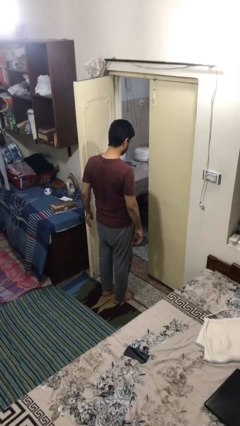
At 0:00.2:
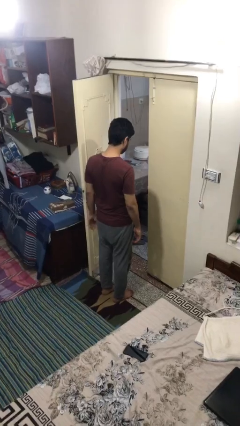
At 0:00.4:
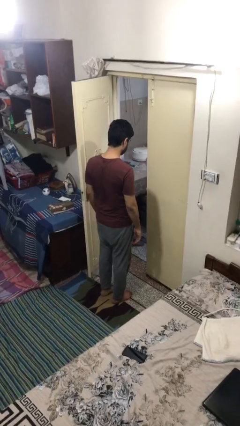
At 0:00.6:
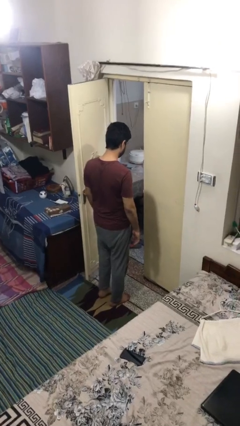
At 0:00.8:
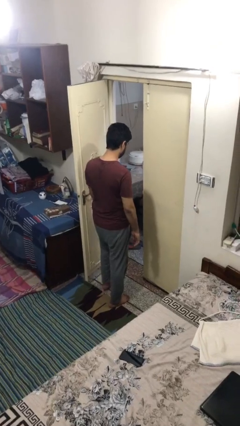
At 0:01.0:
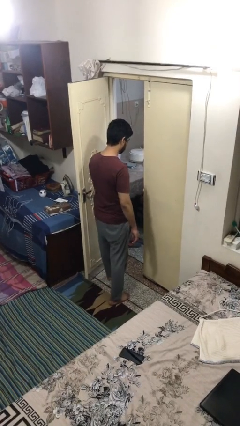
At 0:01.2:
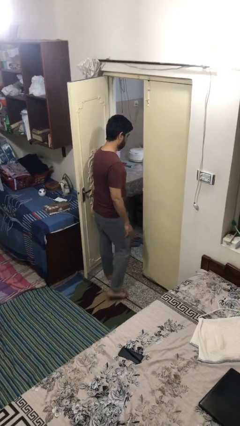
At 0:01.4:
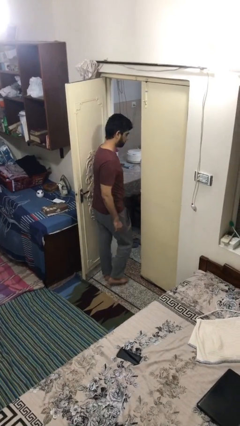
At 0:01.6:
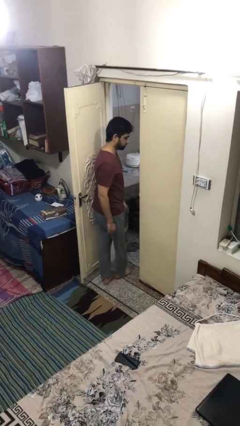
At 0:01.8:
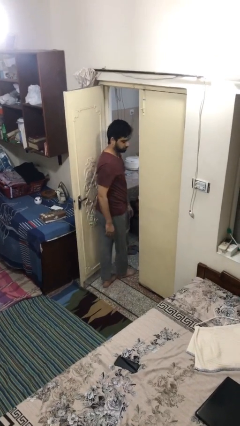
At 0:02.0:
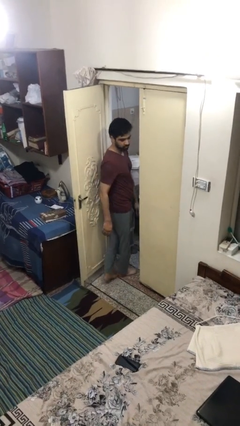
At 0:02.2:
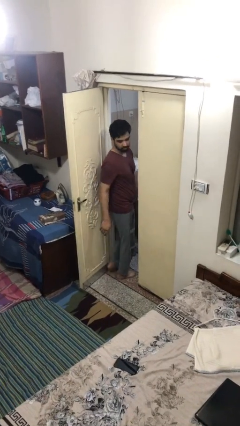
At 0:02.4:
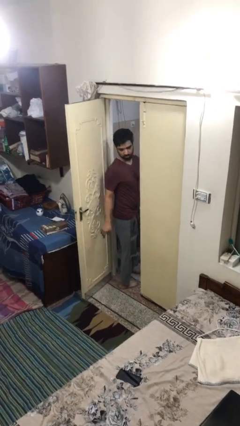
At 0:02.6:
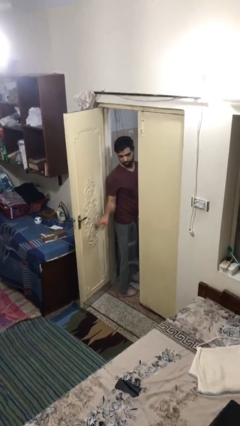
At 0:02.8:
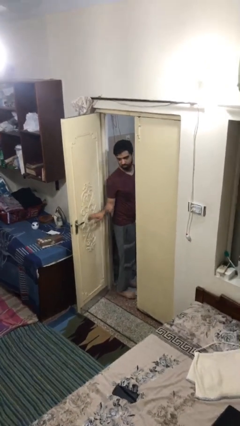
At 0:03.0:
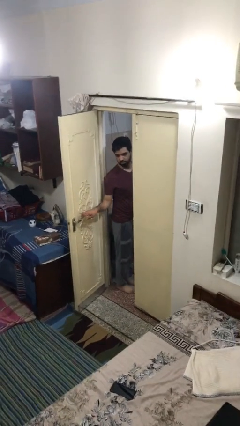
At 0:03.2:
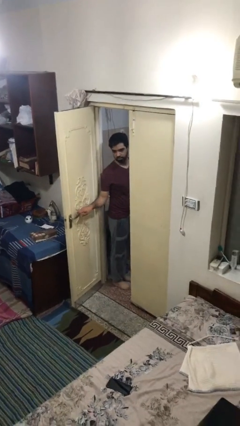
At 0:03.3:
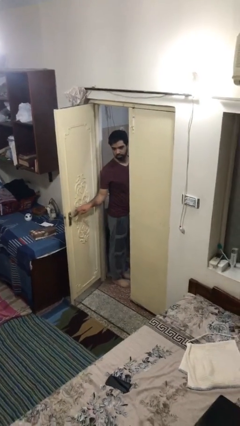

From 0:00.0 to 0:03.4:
person exits scene through structure

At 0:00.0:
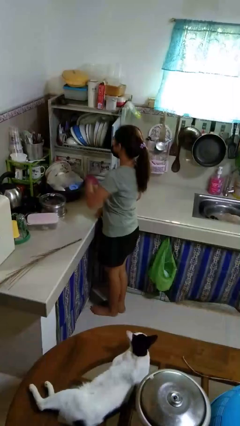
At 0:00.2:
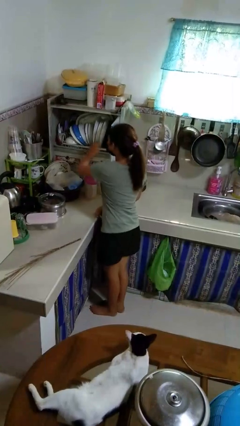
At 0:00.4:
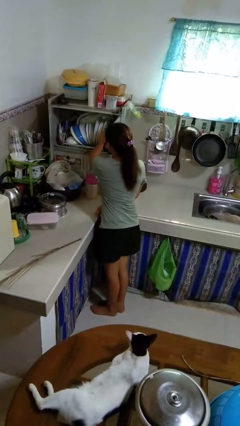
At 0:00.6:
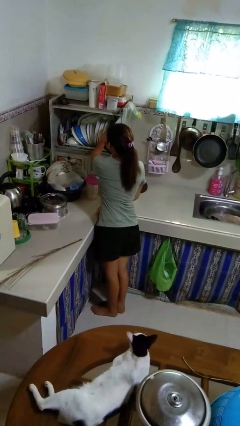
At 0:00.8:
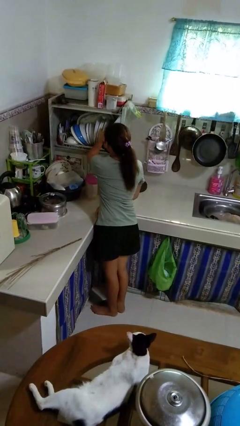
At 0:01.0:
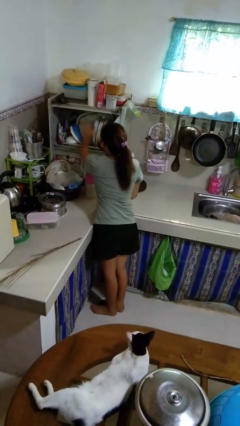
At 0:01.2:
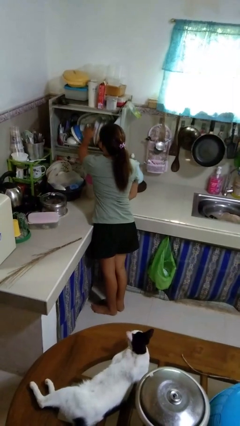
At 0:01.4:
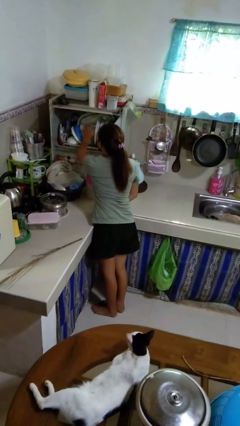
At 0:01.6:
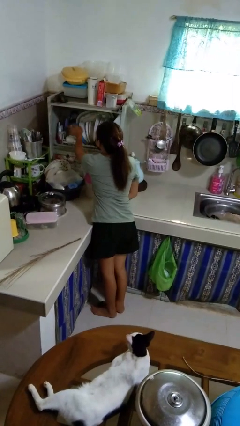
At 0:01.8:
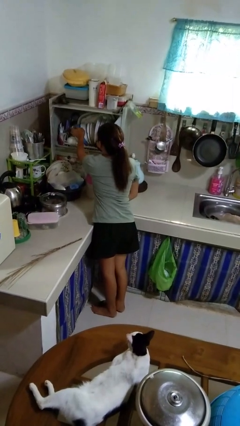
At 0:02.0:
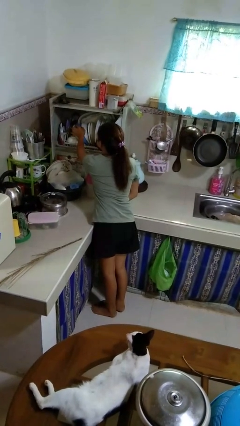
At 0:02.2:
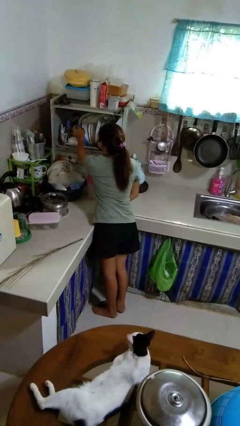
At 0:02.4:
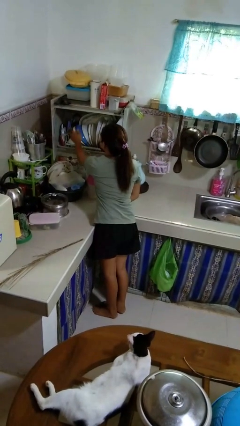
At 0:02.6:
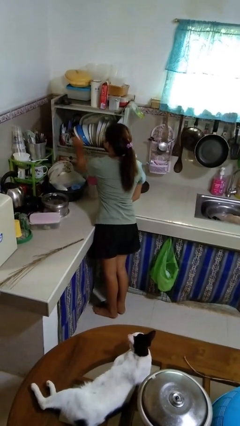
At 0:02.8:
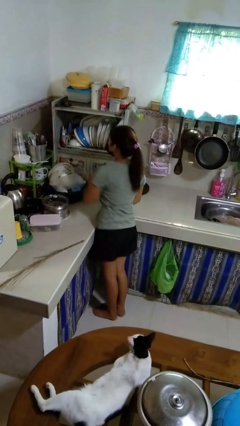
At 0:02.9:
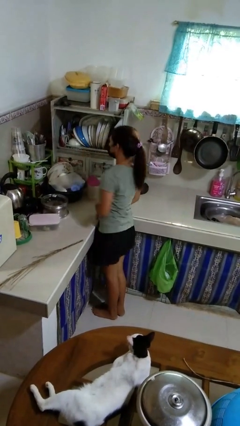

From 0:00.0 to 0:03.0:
person searches in kitchen drawer

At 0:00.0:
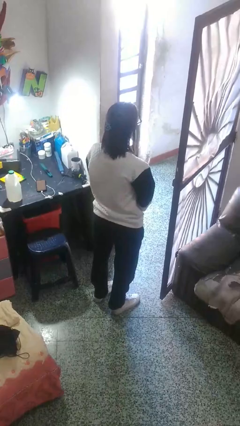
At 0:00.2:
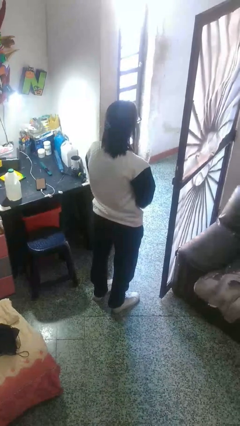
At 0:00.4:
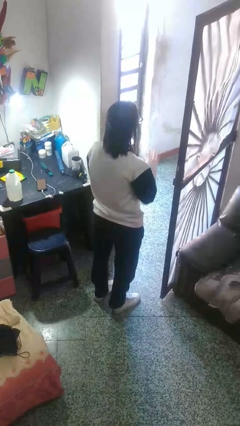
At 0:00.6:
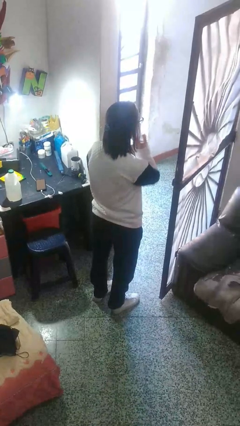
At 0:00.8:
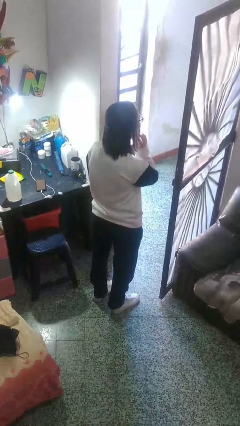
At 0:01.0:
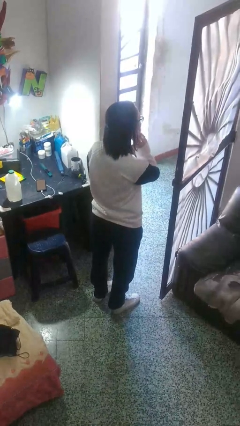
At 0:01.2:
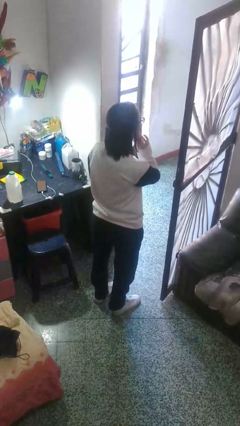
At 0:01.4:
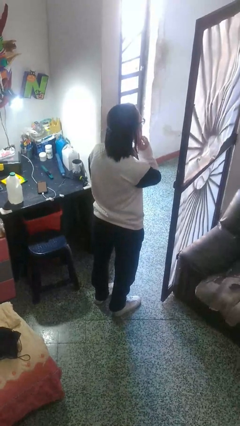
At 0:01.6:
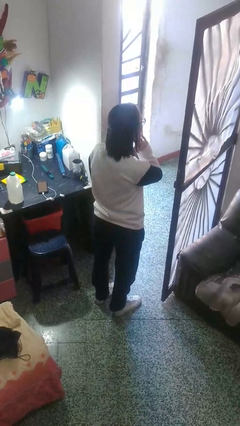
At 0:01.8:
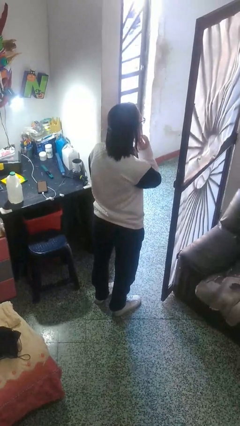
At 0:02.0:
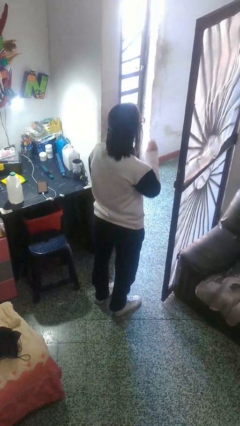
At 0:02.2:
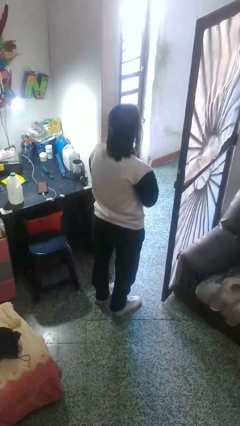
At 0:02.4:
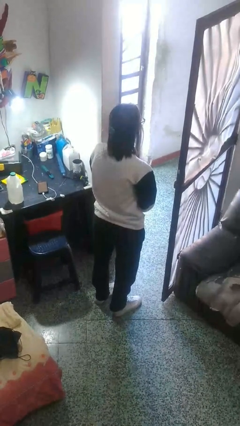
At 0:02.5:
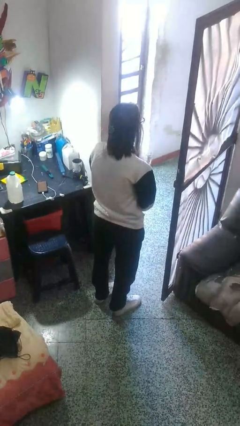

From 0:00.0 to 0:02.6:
person scratches face

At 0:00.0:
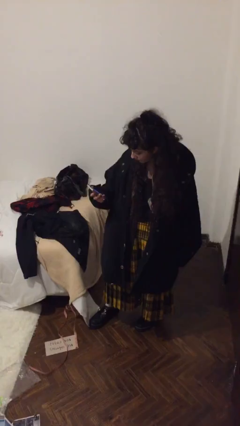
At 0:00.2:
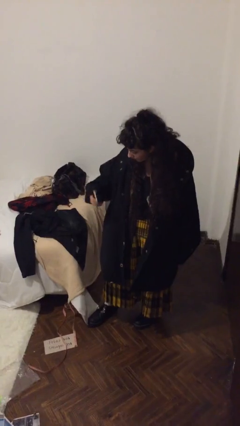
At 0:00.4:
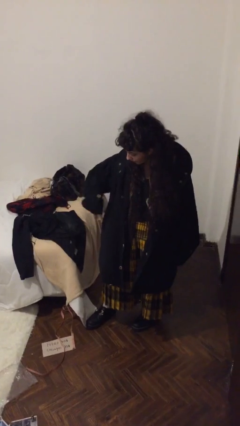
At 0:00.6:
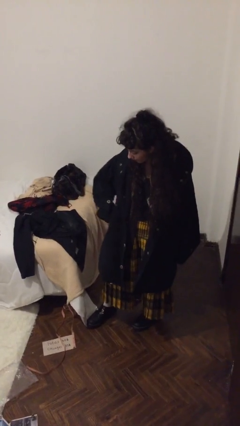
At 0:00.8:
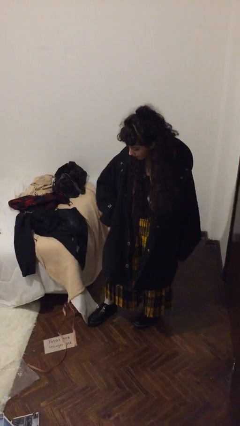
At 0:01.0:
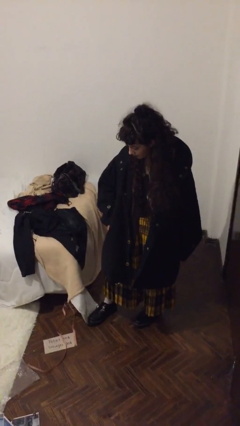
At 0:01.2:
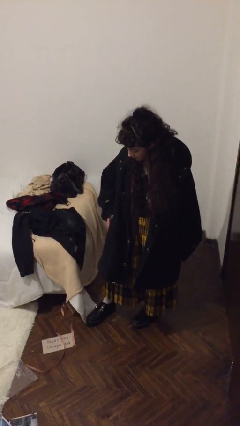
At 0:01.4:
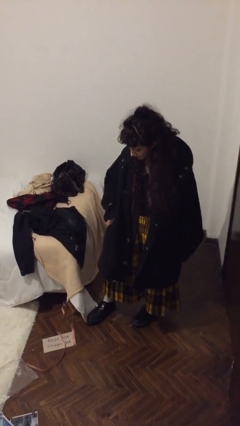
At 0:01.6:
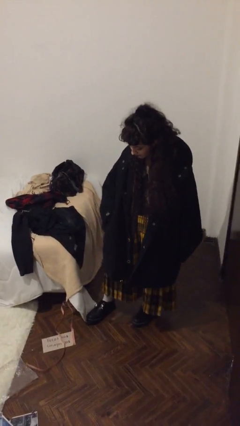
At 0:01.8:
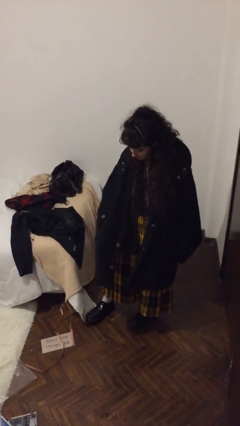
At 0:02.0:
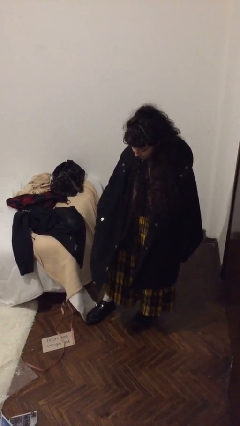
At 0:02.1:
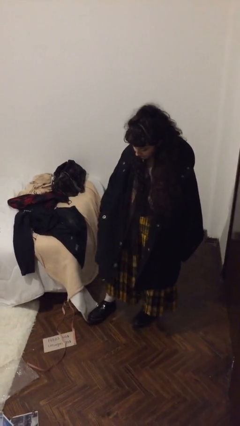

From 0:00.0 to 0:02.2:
person puts phone into pocket

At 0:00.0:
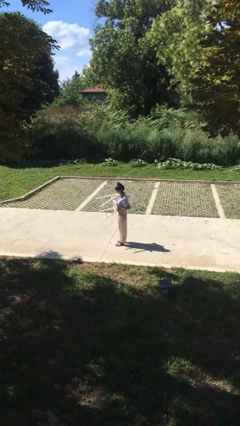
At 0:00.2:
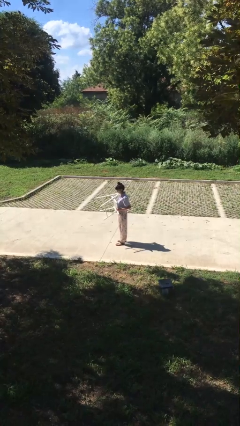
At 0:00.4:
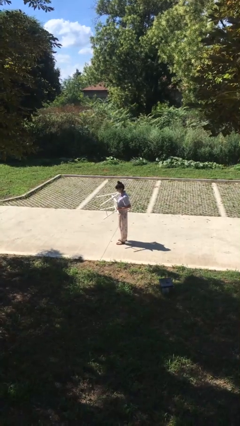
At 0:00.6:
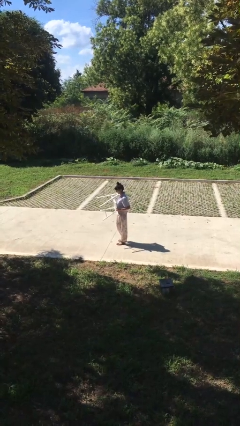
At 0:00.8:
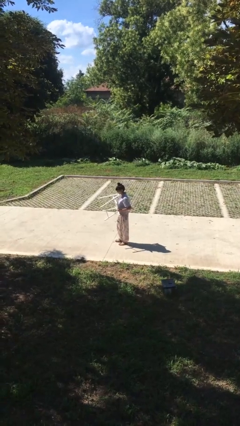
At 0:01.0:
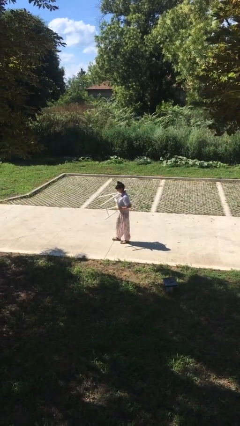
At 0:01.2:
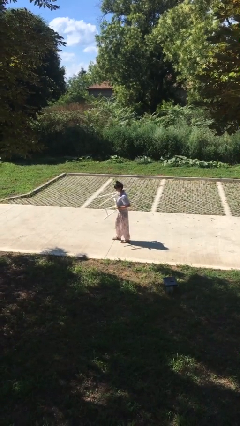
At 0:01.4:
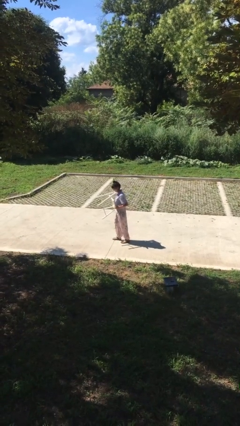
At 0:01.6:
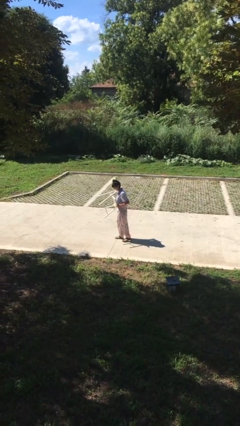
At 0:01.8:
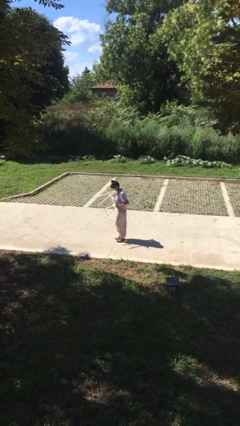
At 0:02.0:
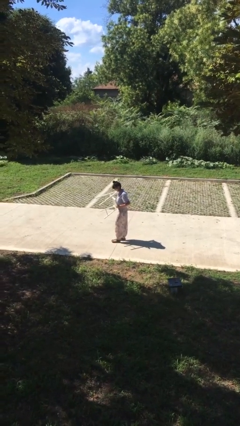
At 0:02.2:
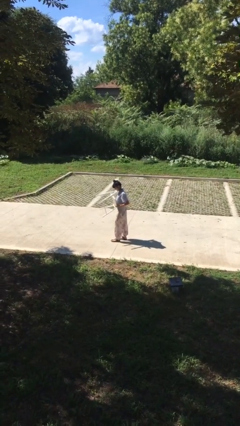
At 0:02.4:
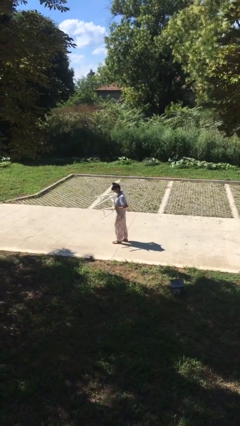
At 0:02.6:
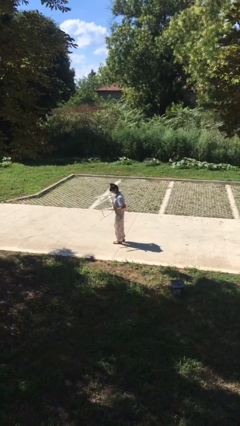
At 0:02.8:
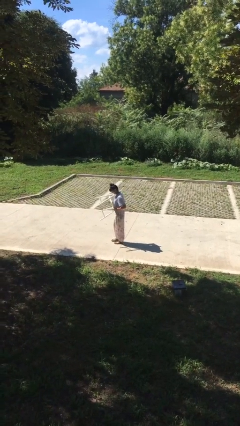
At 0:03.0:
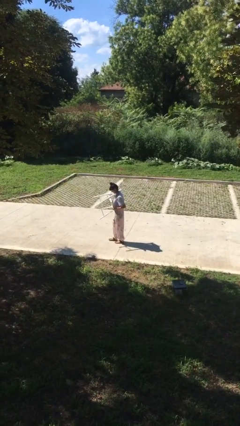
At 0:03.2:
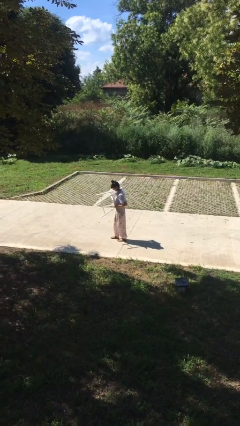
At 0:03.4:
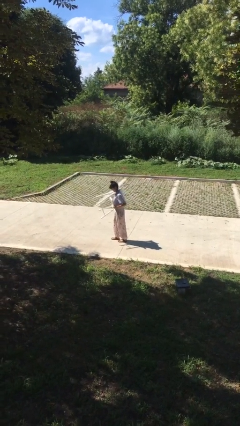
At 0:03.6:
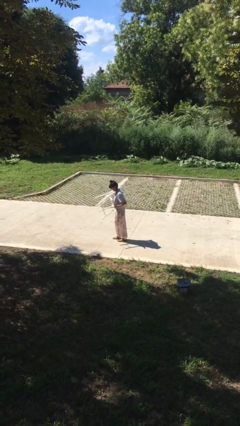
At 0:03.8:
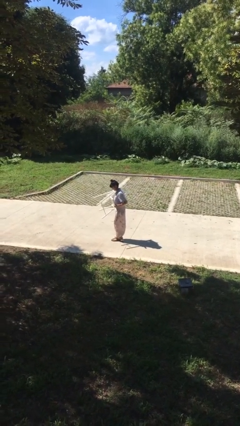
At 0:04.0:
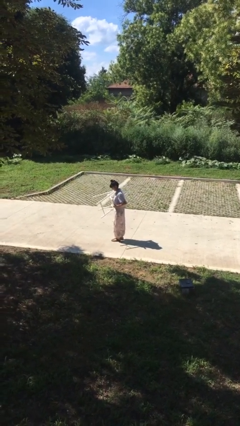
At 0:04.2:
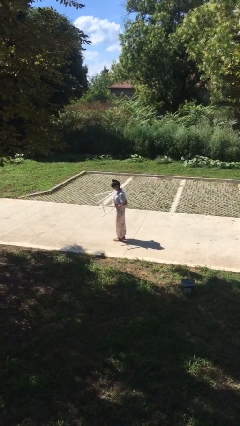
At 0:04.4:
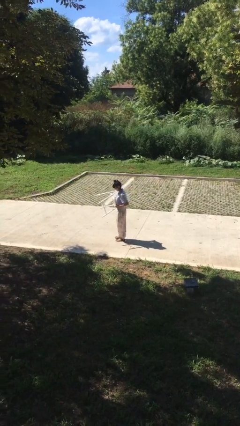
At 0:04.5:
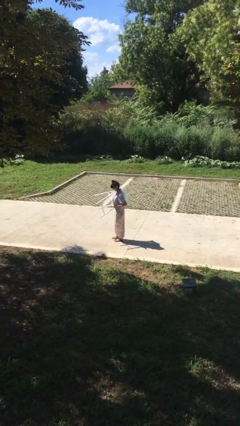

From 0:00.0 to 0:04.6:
person carries heavy object

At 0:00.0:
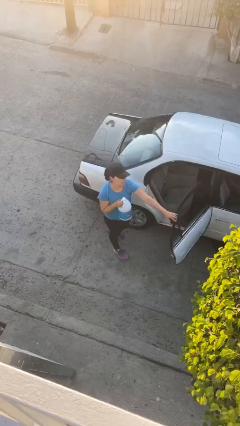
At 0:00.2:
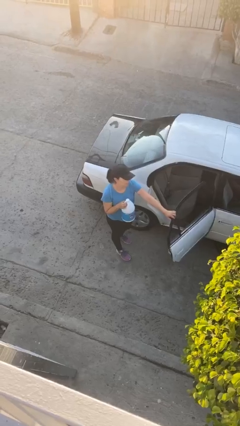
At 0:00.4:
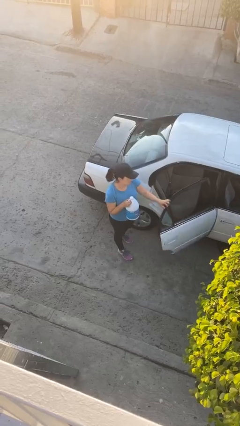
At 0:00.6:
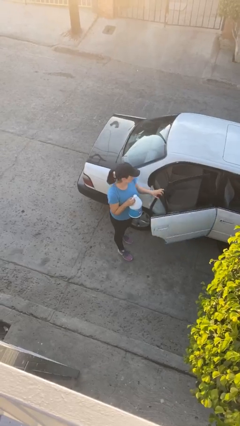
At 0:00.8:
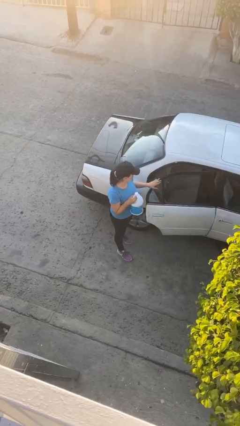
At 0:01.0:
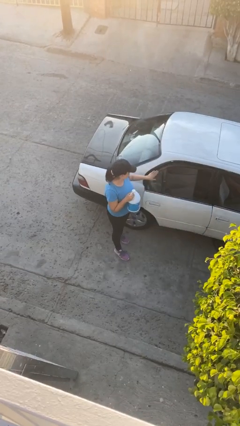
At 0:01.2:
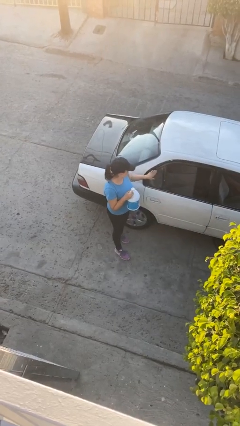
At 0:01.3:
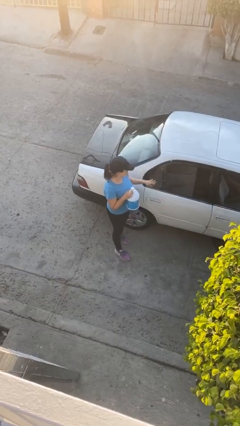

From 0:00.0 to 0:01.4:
person closes car door
